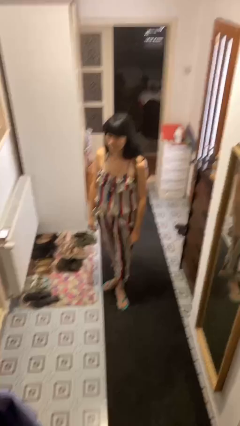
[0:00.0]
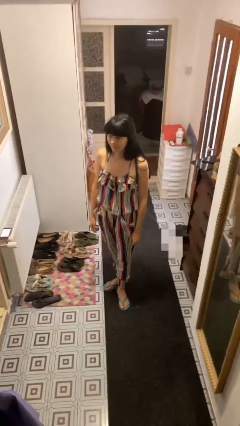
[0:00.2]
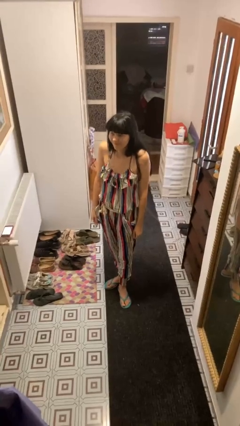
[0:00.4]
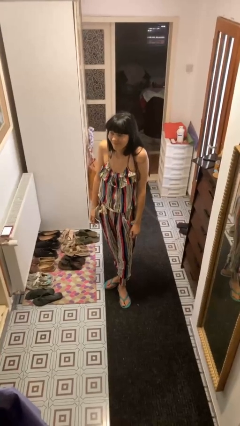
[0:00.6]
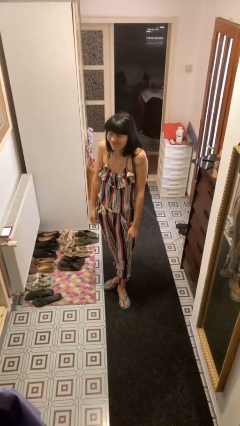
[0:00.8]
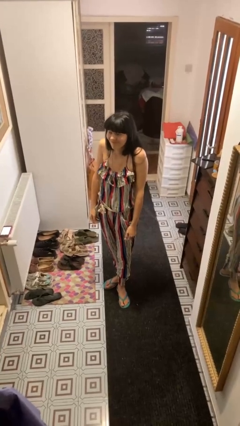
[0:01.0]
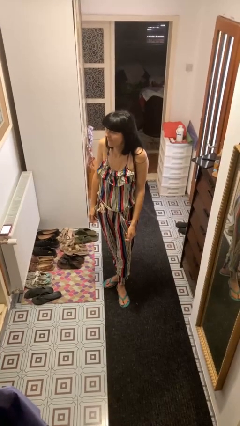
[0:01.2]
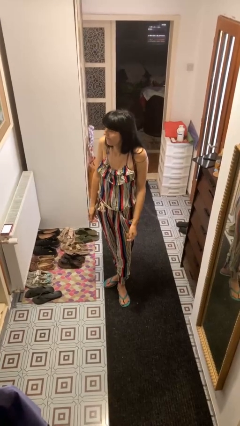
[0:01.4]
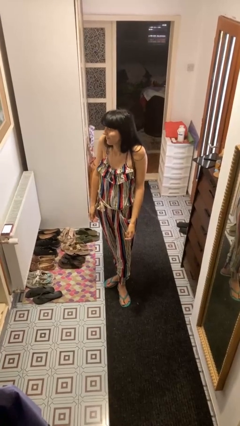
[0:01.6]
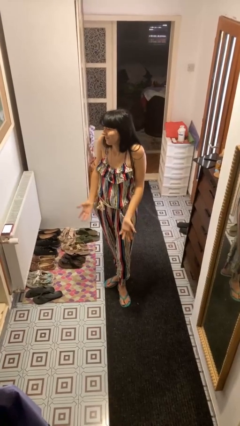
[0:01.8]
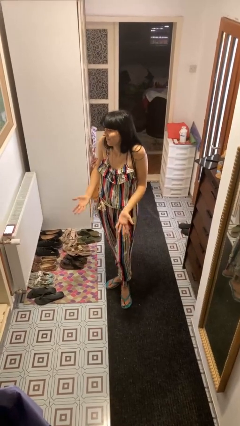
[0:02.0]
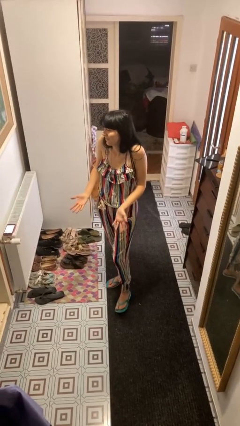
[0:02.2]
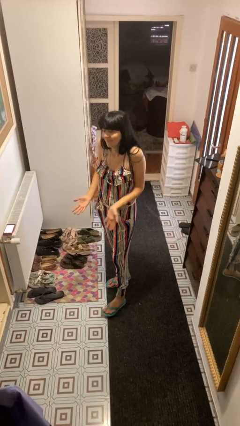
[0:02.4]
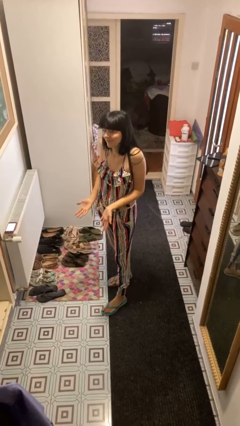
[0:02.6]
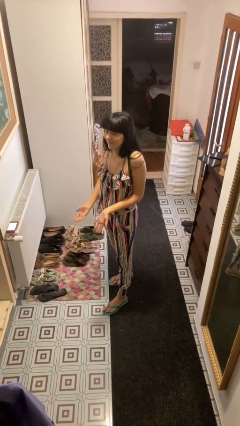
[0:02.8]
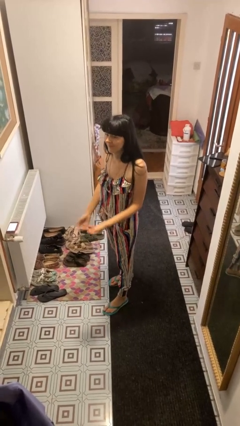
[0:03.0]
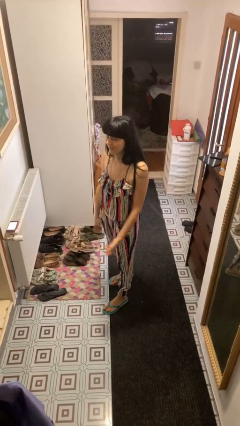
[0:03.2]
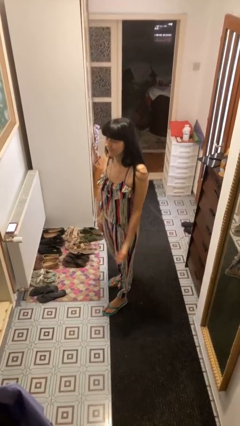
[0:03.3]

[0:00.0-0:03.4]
person shrugs

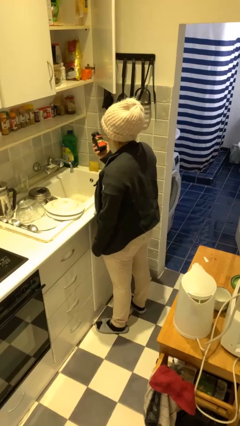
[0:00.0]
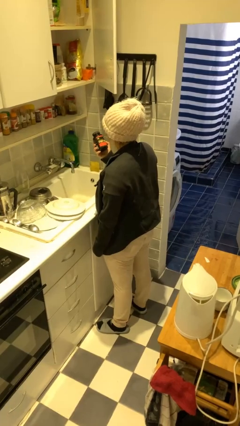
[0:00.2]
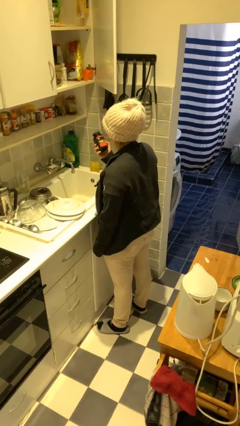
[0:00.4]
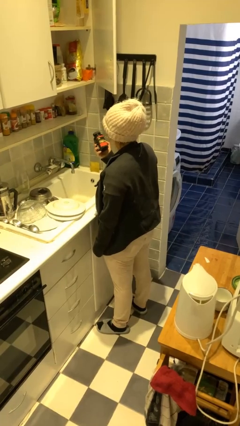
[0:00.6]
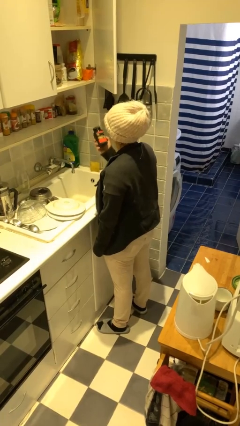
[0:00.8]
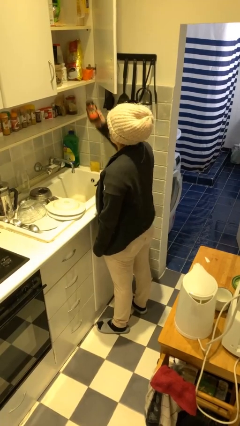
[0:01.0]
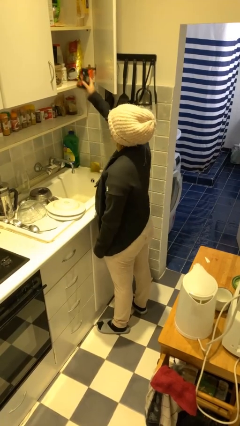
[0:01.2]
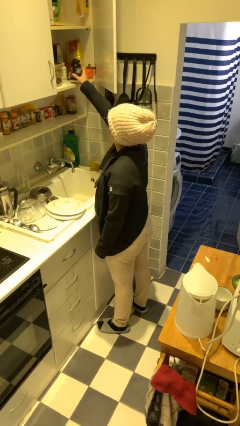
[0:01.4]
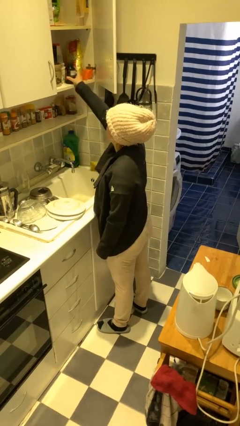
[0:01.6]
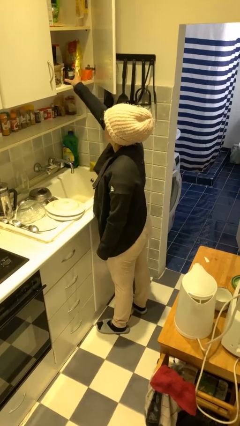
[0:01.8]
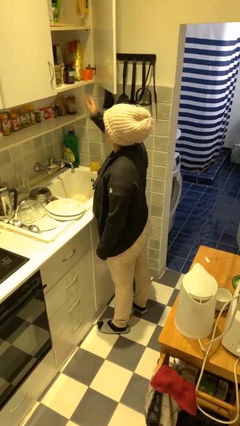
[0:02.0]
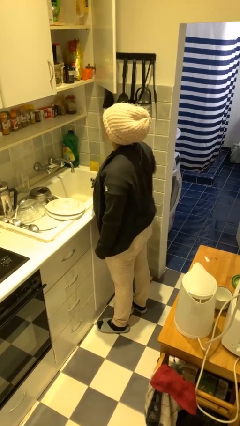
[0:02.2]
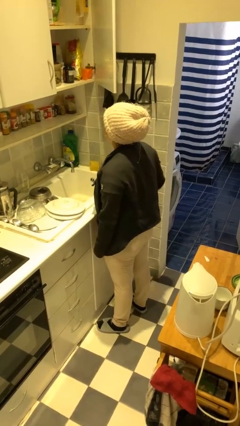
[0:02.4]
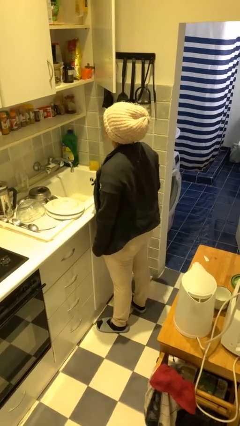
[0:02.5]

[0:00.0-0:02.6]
person puts down object into cabinet

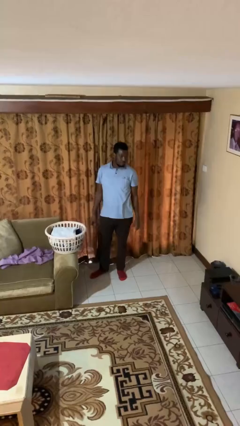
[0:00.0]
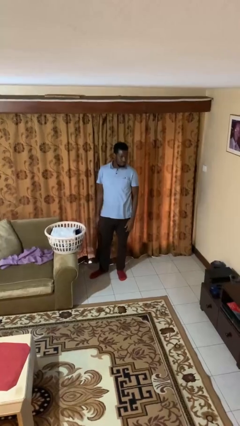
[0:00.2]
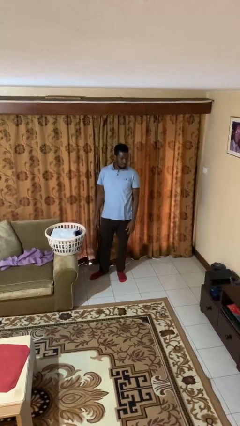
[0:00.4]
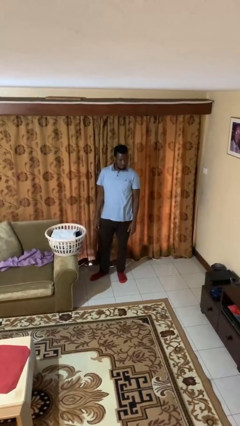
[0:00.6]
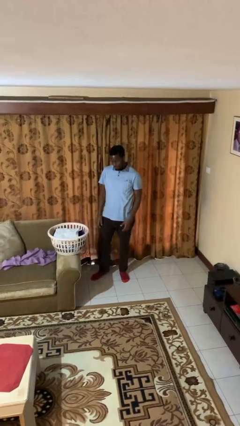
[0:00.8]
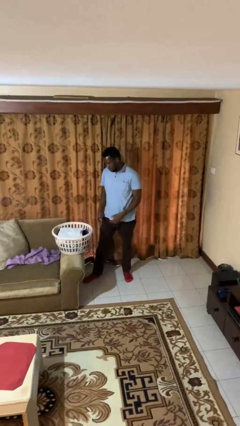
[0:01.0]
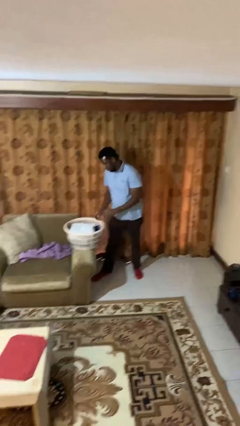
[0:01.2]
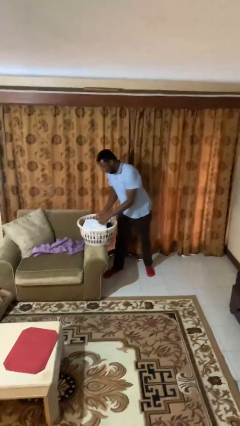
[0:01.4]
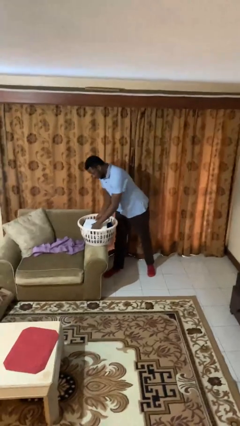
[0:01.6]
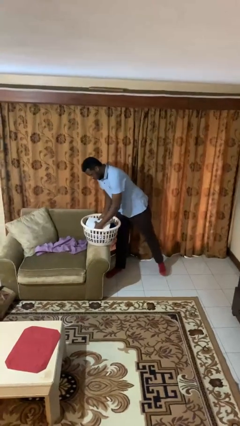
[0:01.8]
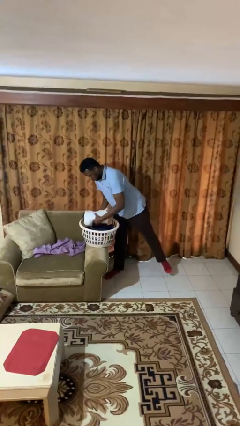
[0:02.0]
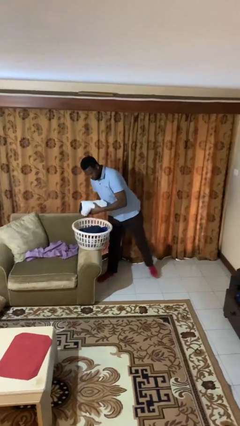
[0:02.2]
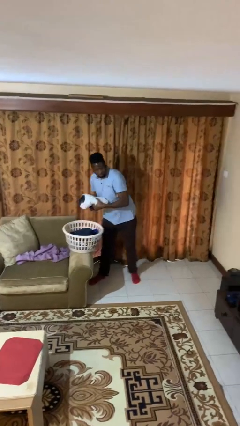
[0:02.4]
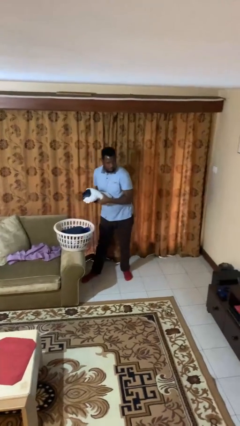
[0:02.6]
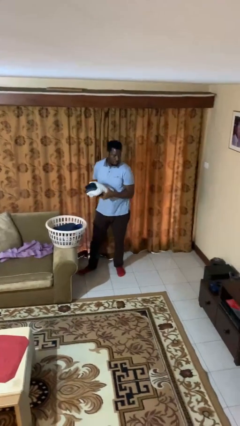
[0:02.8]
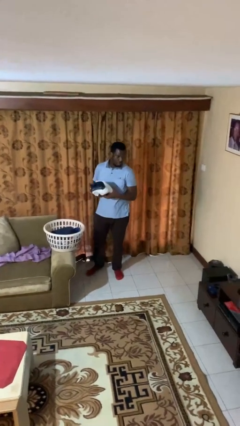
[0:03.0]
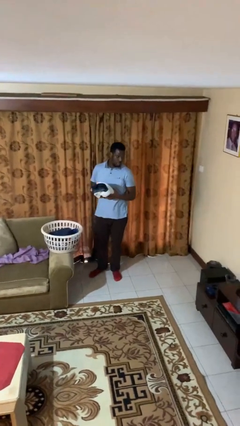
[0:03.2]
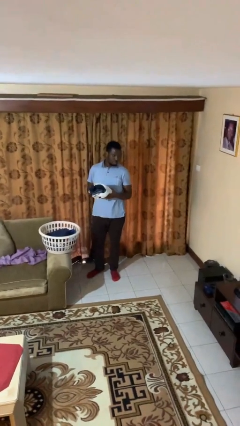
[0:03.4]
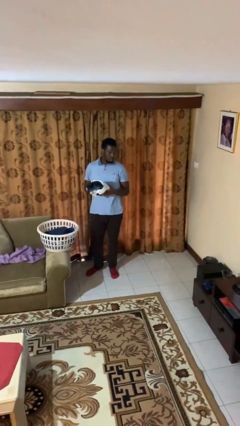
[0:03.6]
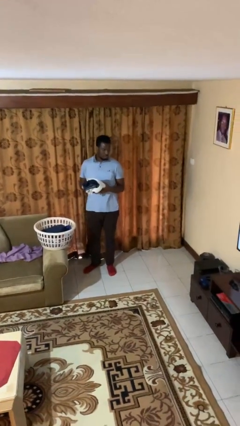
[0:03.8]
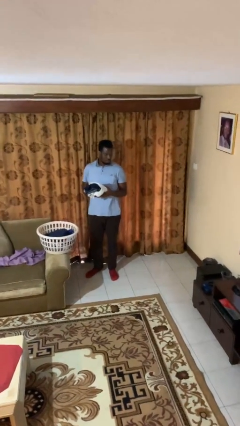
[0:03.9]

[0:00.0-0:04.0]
person takes object from basket

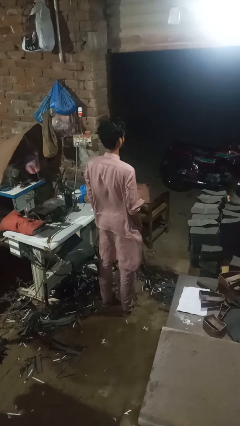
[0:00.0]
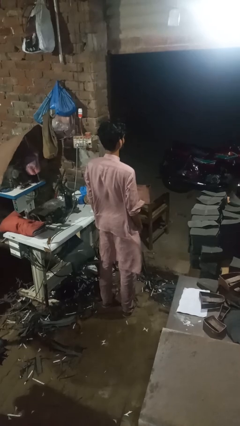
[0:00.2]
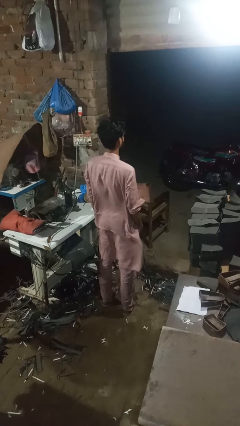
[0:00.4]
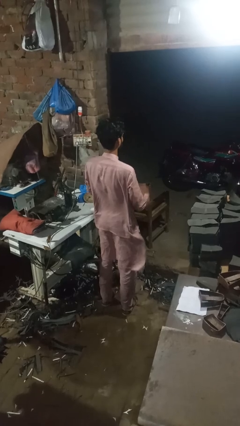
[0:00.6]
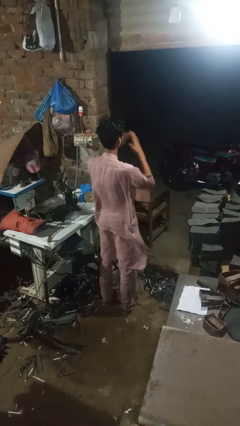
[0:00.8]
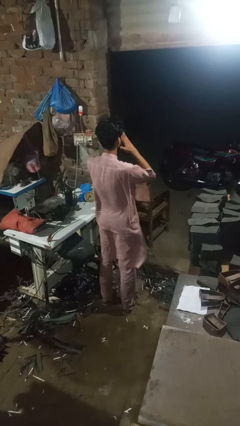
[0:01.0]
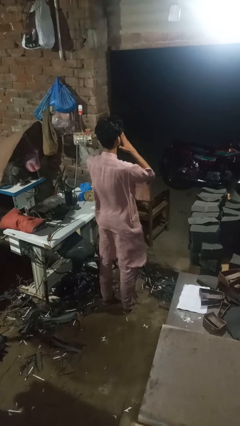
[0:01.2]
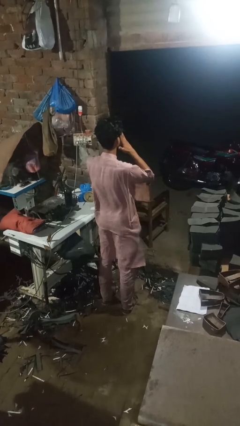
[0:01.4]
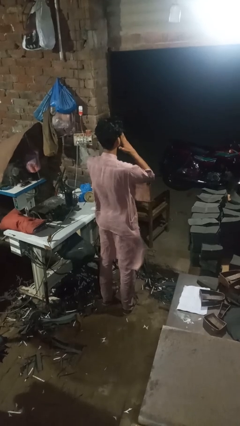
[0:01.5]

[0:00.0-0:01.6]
person sneezes into hand

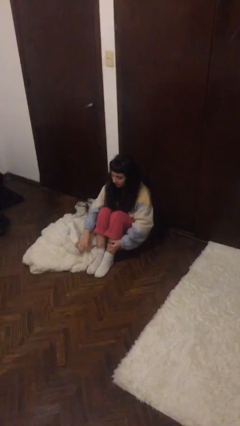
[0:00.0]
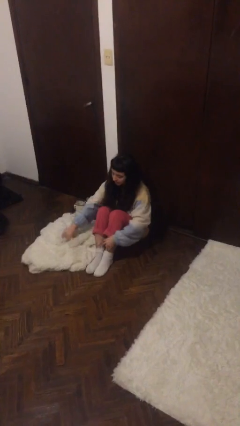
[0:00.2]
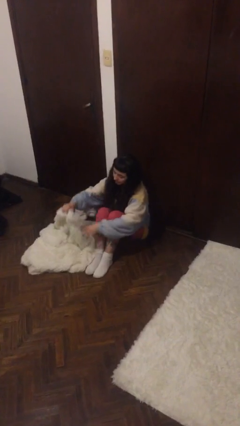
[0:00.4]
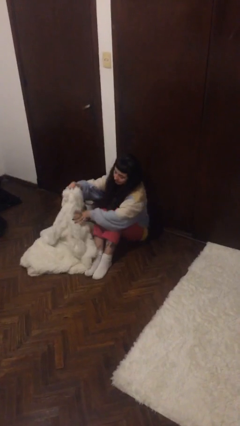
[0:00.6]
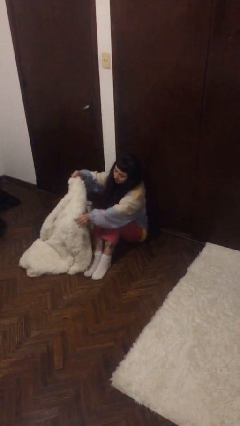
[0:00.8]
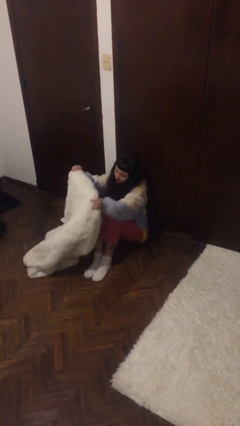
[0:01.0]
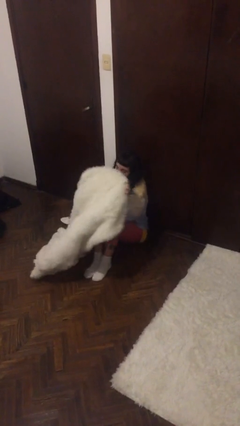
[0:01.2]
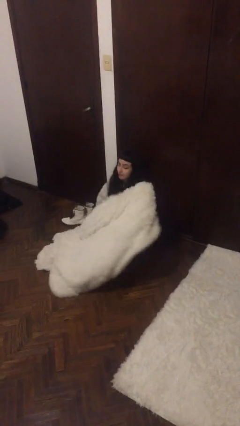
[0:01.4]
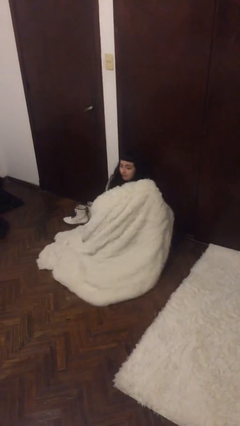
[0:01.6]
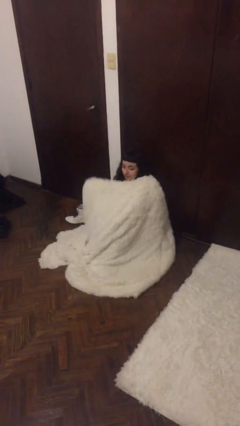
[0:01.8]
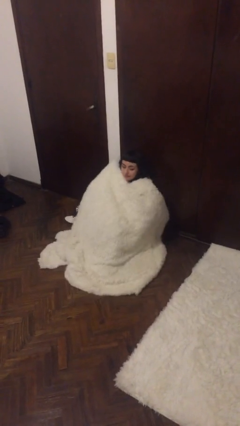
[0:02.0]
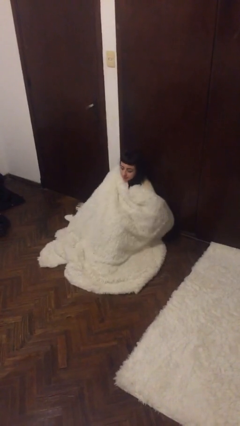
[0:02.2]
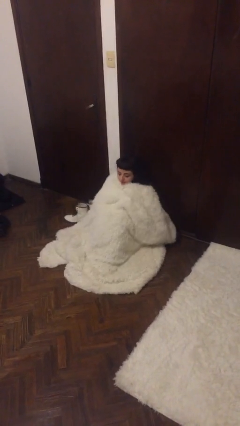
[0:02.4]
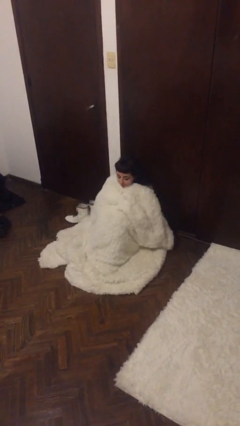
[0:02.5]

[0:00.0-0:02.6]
person covers with blanket

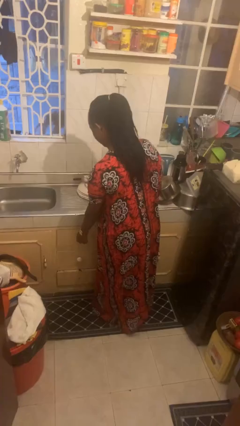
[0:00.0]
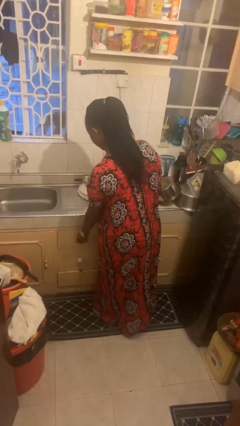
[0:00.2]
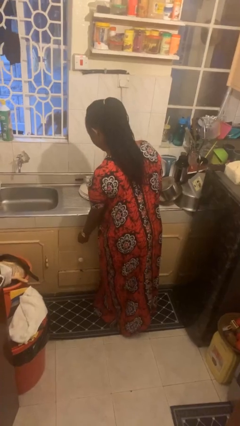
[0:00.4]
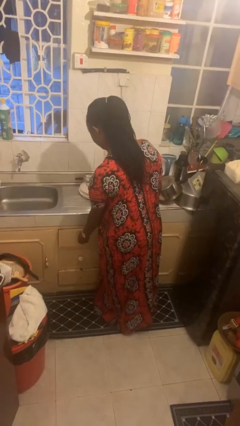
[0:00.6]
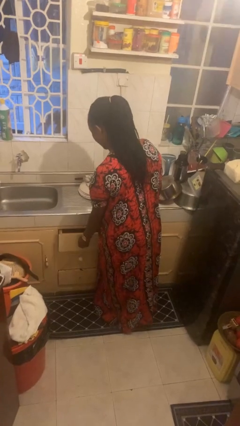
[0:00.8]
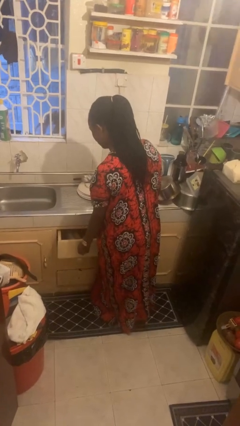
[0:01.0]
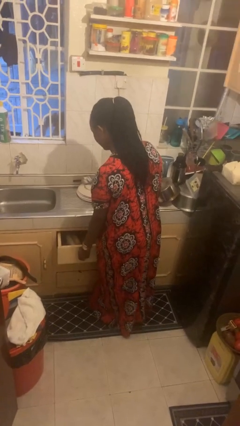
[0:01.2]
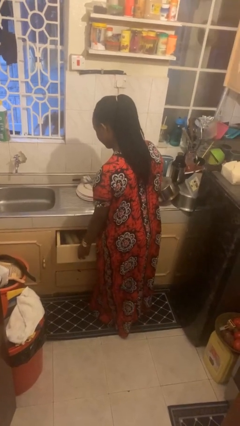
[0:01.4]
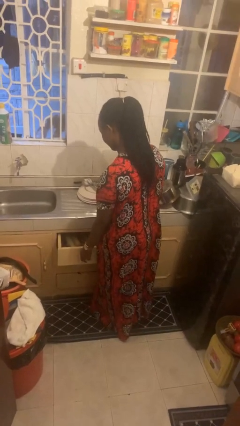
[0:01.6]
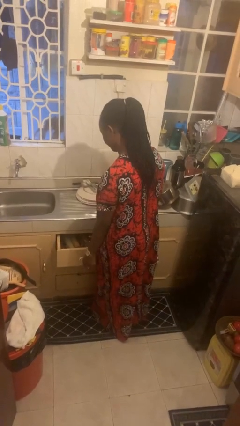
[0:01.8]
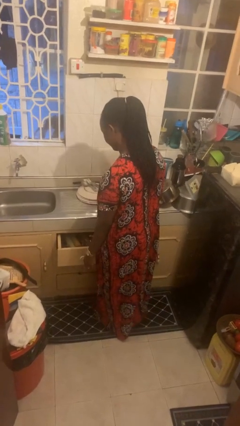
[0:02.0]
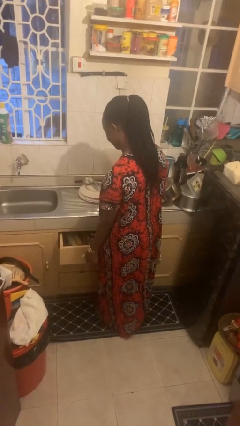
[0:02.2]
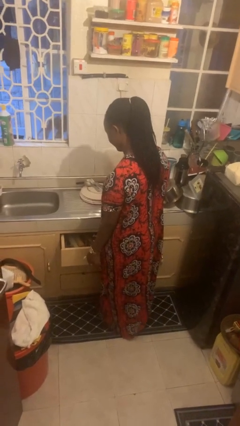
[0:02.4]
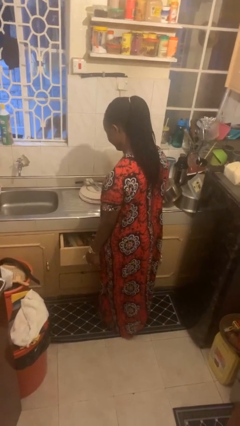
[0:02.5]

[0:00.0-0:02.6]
person opens kitchen drawer

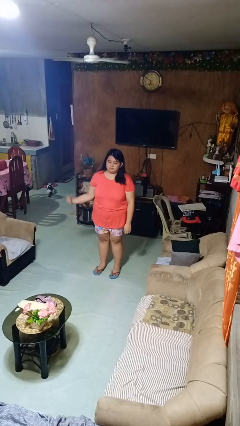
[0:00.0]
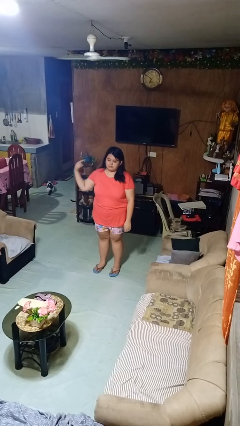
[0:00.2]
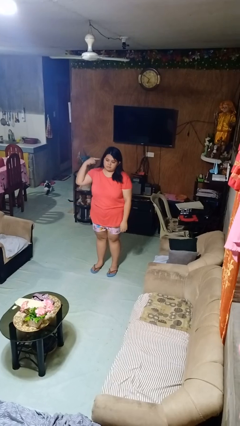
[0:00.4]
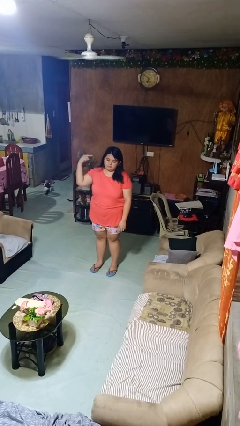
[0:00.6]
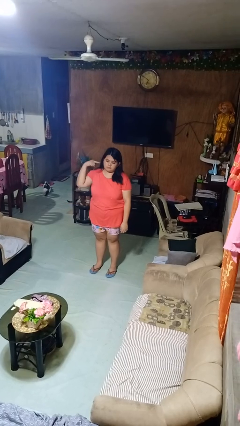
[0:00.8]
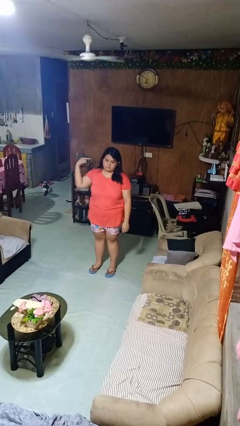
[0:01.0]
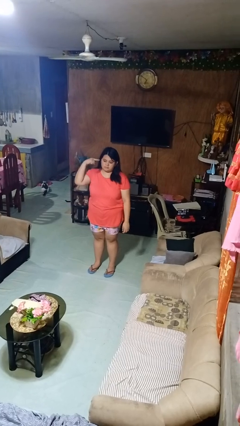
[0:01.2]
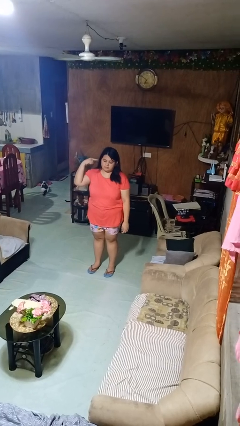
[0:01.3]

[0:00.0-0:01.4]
person gestures listen closely
